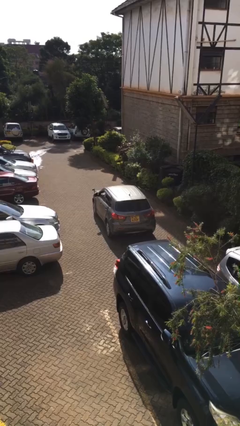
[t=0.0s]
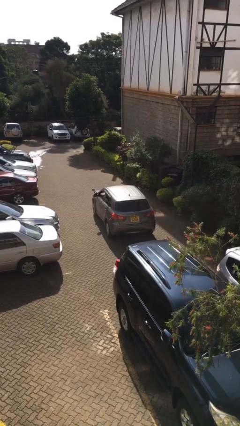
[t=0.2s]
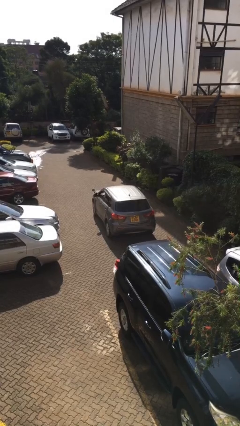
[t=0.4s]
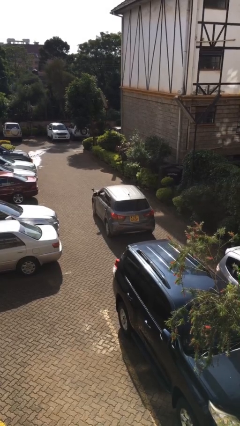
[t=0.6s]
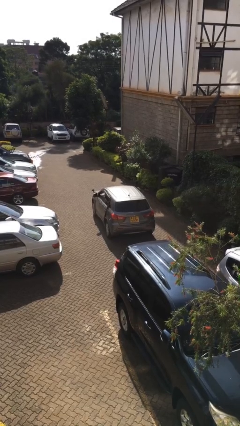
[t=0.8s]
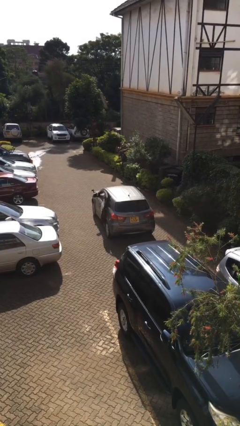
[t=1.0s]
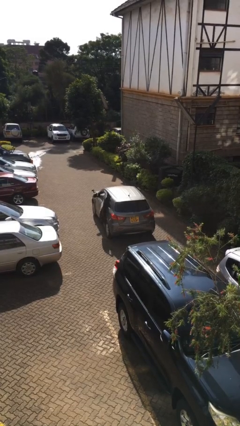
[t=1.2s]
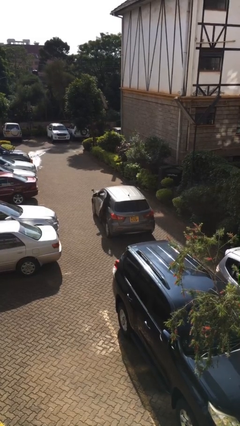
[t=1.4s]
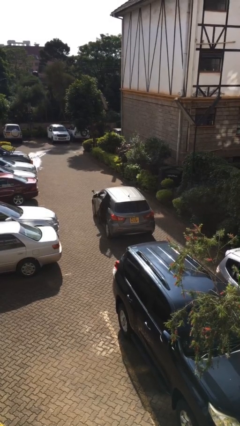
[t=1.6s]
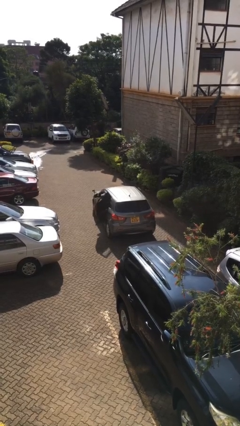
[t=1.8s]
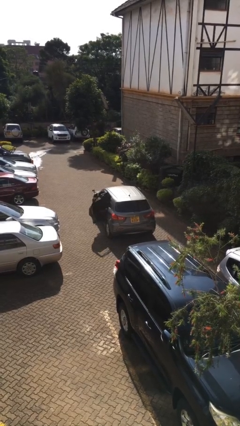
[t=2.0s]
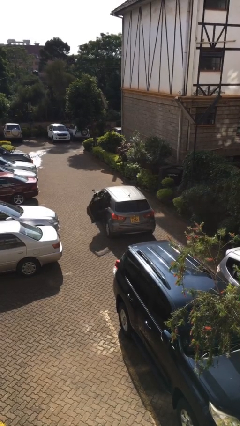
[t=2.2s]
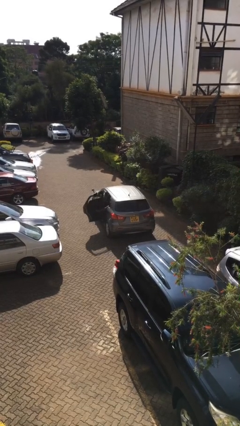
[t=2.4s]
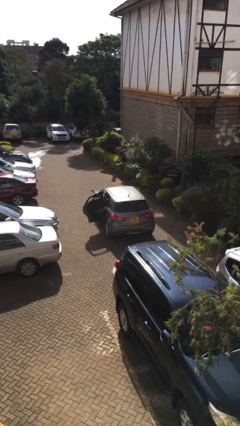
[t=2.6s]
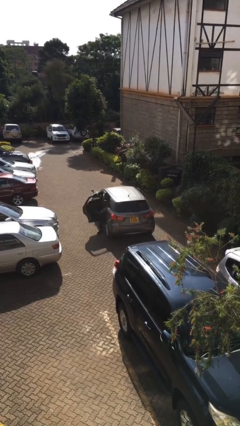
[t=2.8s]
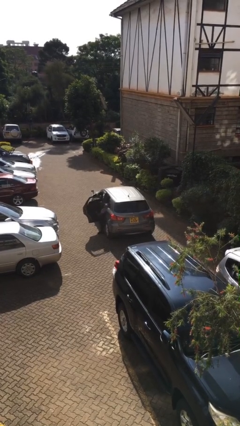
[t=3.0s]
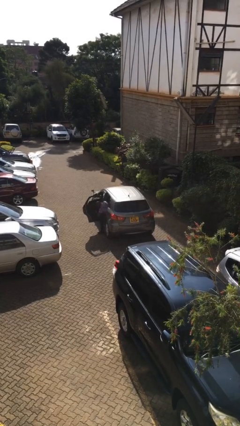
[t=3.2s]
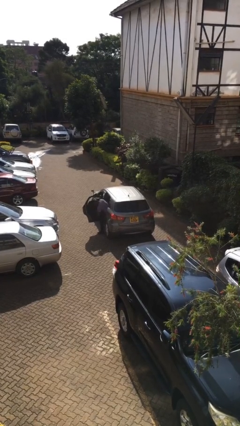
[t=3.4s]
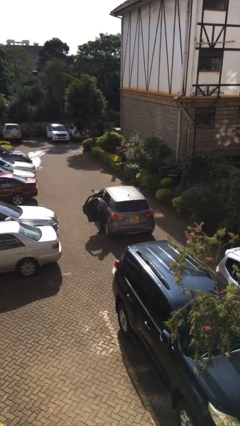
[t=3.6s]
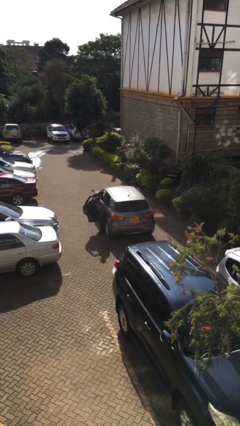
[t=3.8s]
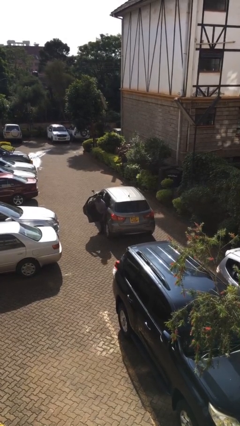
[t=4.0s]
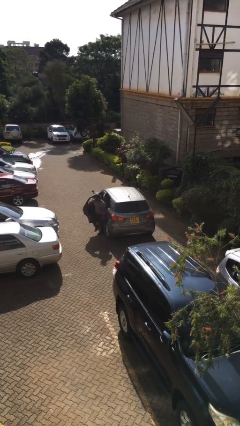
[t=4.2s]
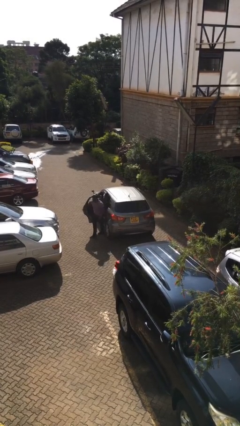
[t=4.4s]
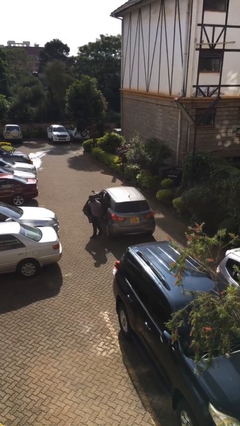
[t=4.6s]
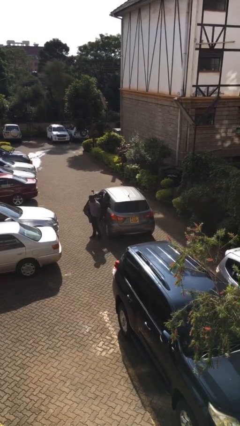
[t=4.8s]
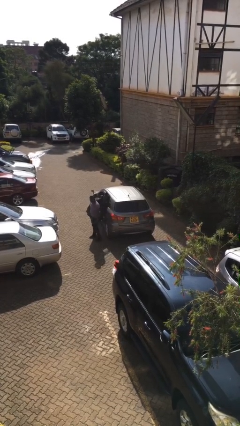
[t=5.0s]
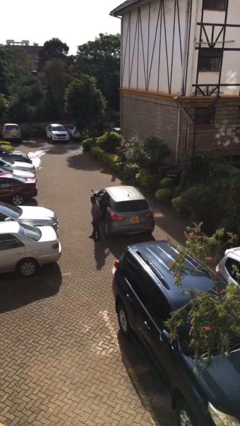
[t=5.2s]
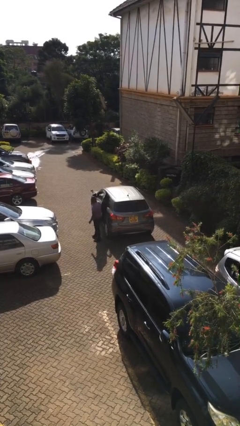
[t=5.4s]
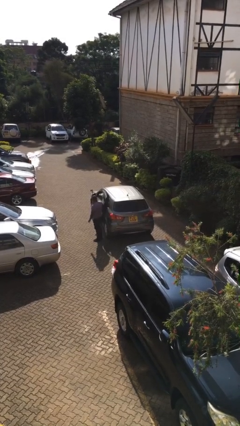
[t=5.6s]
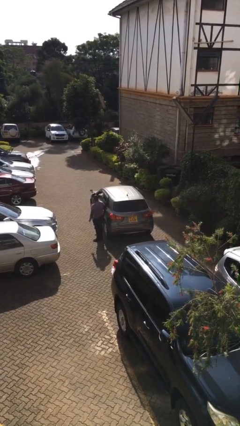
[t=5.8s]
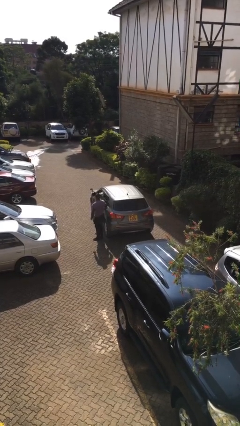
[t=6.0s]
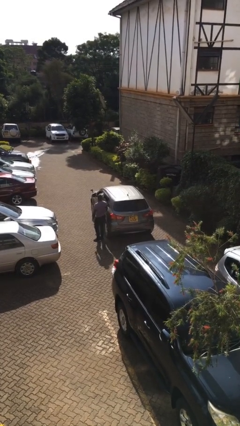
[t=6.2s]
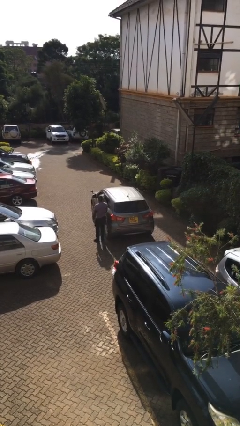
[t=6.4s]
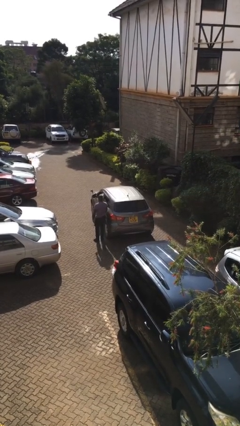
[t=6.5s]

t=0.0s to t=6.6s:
car drops off person

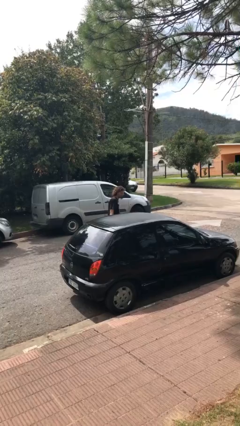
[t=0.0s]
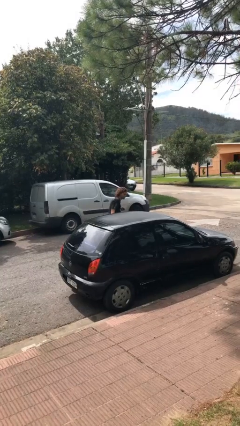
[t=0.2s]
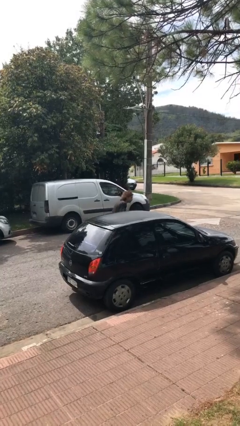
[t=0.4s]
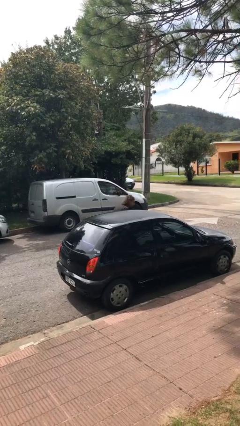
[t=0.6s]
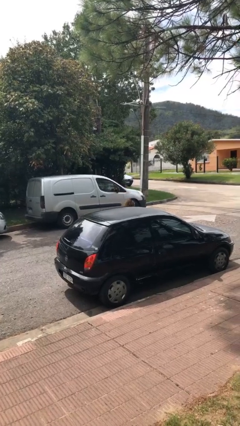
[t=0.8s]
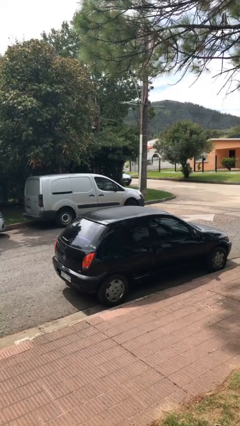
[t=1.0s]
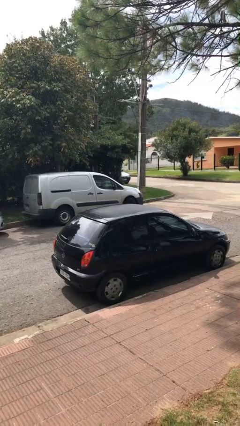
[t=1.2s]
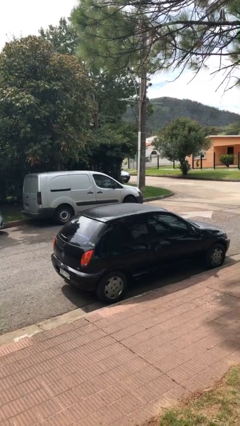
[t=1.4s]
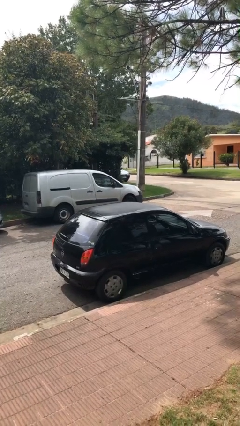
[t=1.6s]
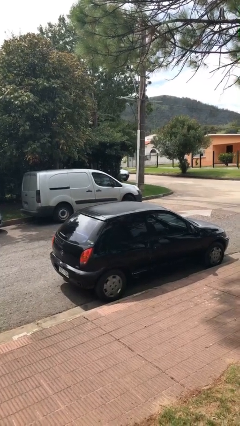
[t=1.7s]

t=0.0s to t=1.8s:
person enters car

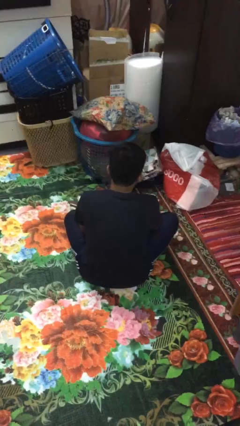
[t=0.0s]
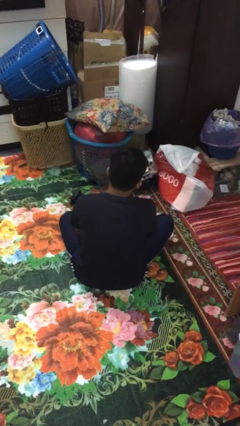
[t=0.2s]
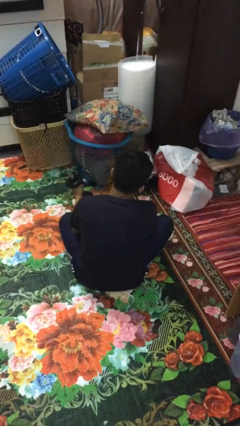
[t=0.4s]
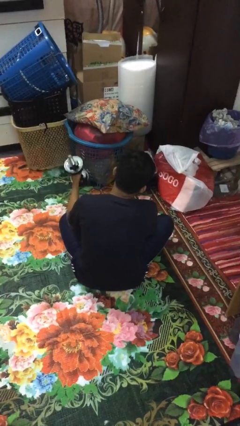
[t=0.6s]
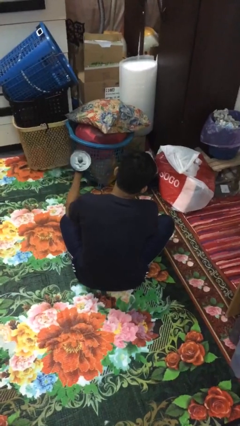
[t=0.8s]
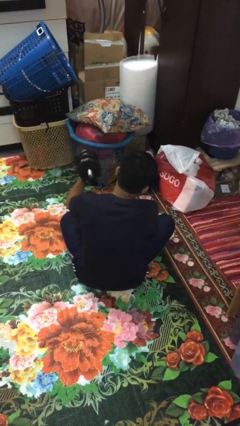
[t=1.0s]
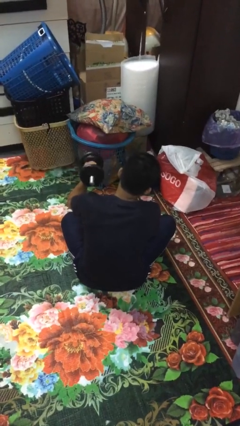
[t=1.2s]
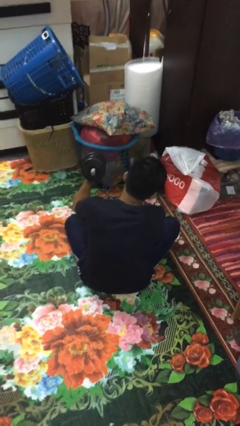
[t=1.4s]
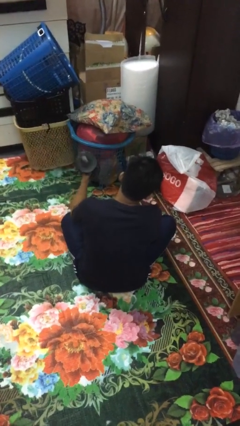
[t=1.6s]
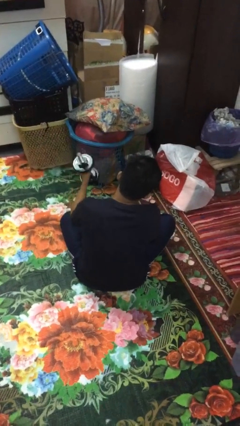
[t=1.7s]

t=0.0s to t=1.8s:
person lifts dumbbells

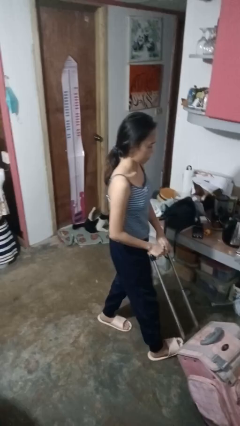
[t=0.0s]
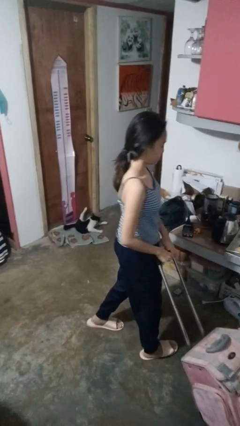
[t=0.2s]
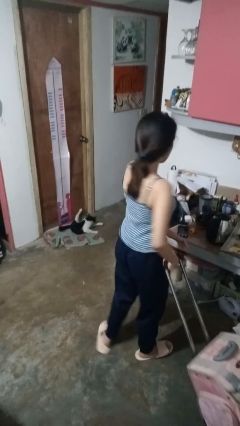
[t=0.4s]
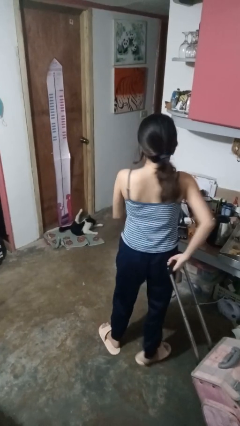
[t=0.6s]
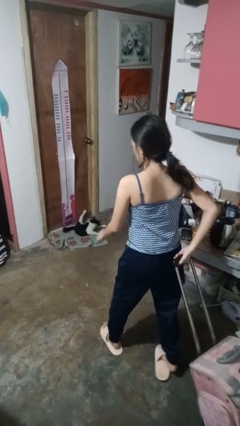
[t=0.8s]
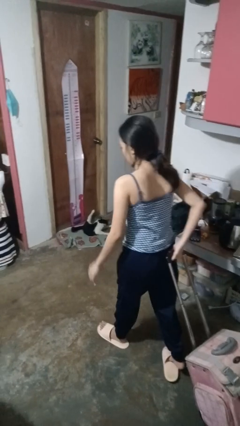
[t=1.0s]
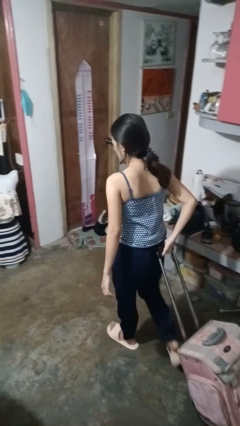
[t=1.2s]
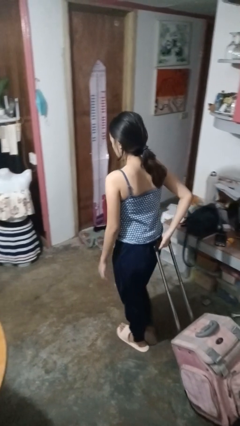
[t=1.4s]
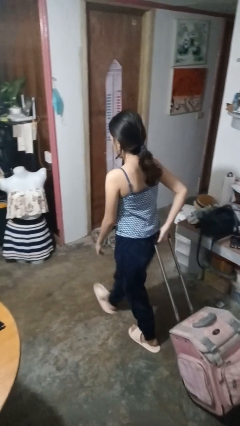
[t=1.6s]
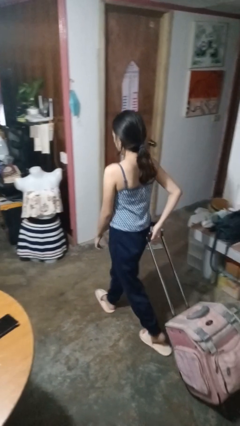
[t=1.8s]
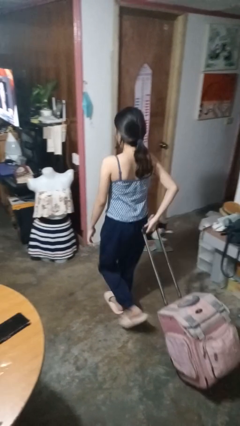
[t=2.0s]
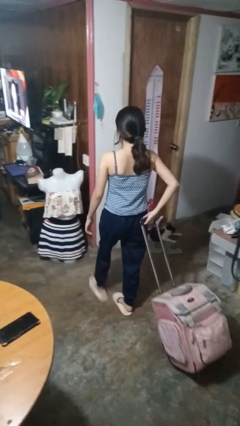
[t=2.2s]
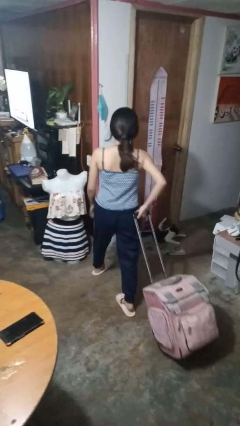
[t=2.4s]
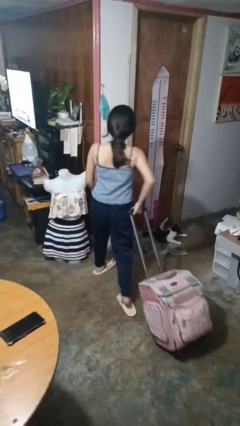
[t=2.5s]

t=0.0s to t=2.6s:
person pulls wheeled cart

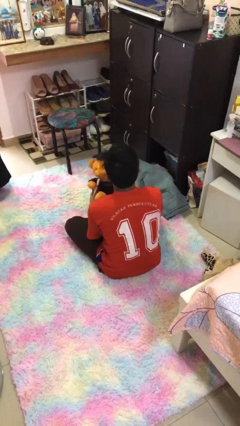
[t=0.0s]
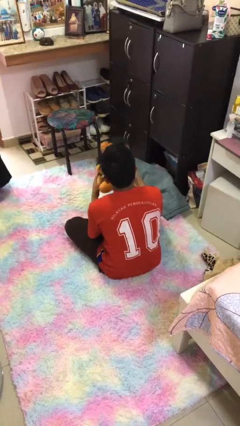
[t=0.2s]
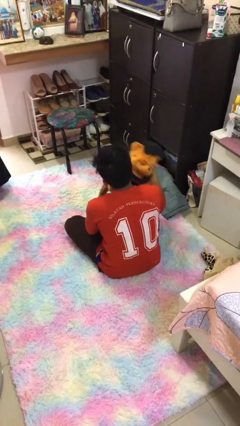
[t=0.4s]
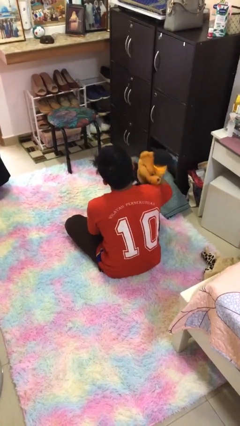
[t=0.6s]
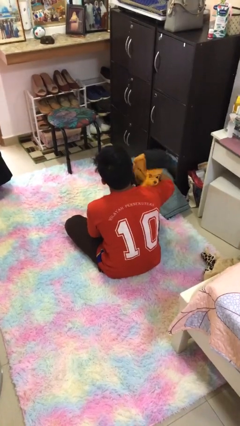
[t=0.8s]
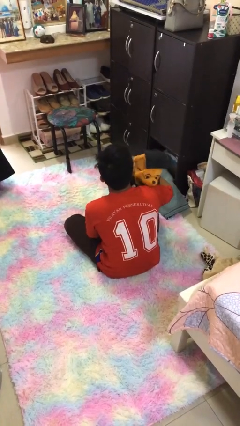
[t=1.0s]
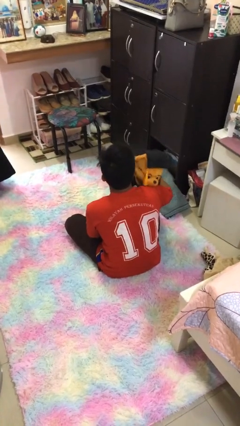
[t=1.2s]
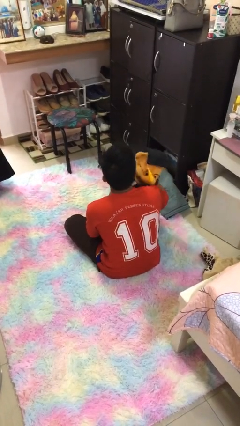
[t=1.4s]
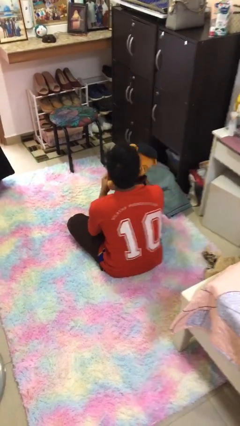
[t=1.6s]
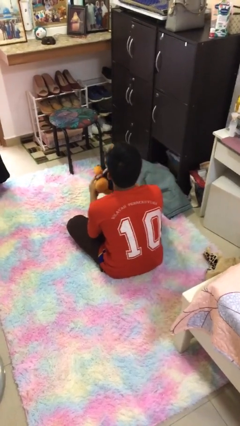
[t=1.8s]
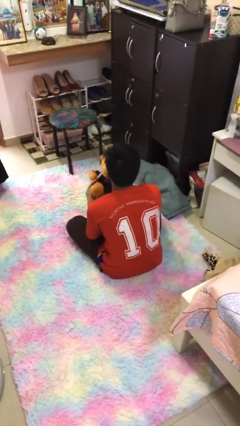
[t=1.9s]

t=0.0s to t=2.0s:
person hugs stuffed animal

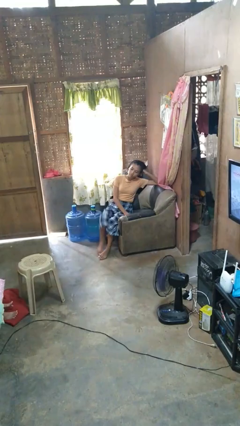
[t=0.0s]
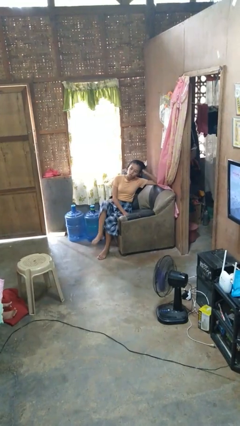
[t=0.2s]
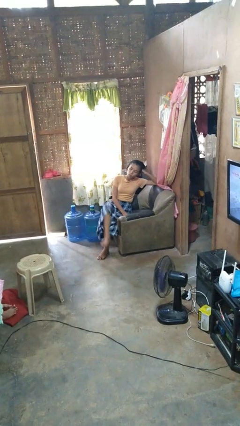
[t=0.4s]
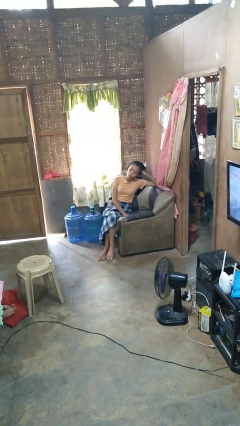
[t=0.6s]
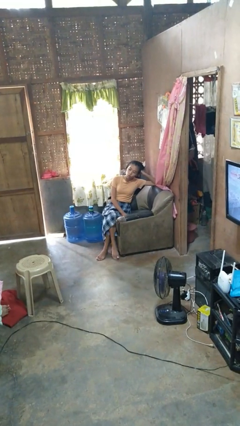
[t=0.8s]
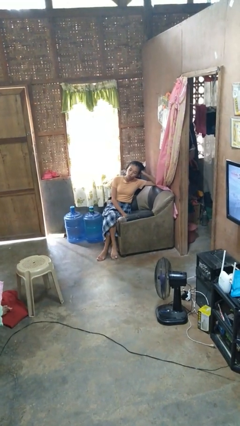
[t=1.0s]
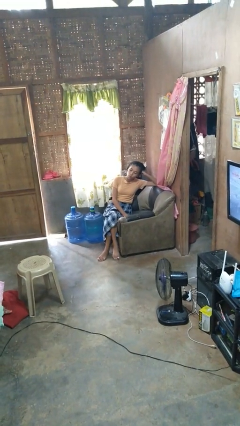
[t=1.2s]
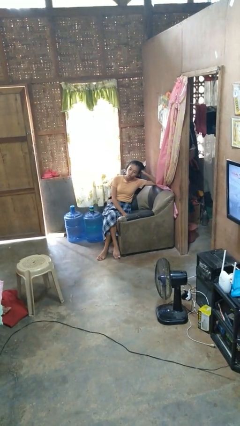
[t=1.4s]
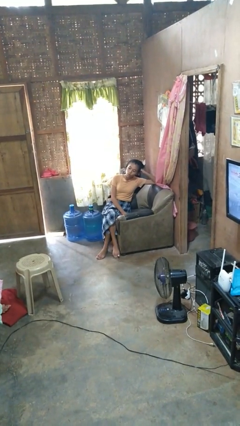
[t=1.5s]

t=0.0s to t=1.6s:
person crosses legs

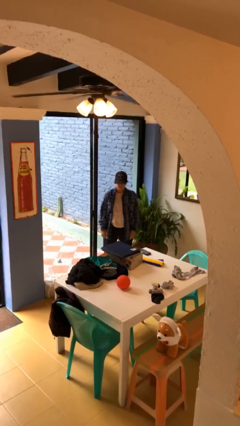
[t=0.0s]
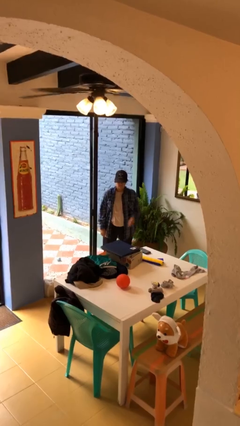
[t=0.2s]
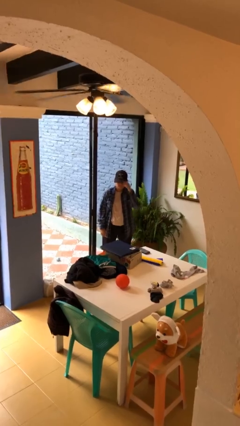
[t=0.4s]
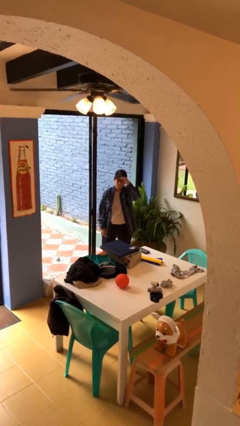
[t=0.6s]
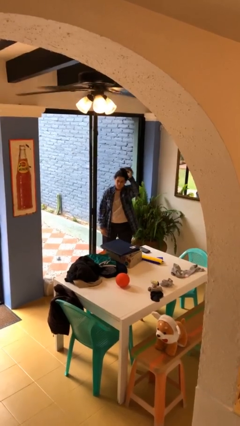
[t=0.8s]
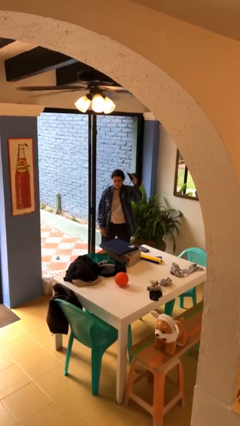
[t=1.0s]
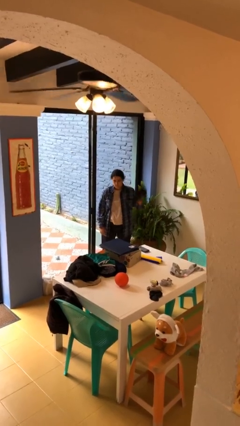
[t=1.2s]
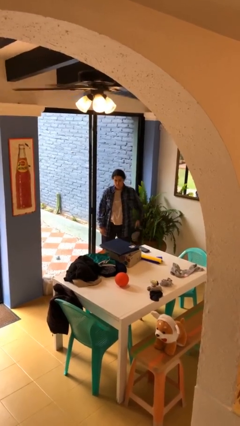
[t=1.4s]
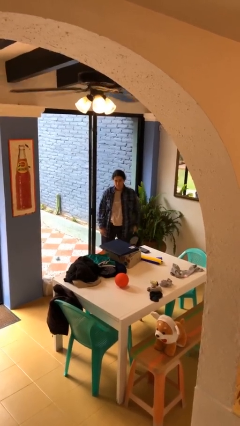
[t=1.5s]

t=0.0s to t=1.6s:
person takes off hat
